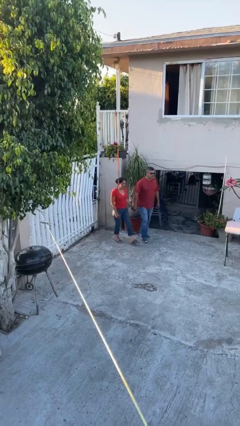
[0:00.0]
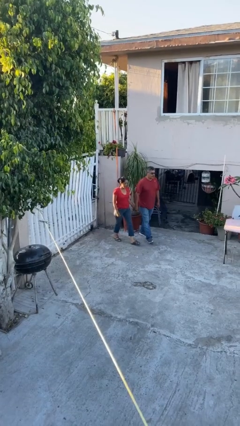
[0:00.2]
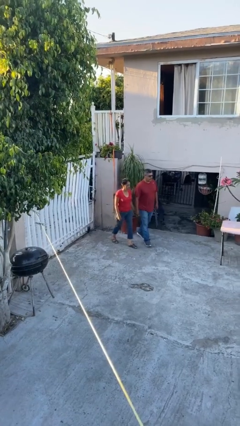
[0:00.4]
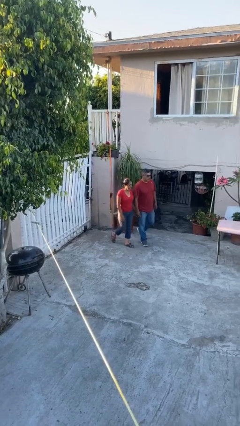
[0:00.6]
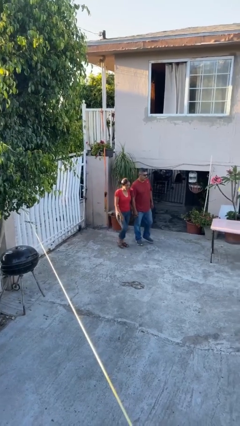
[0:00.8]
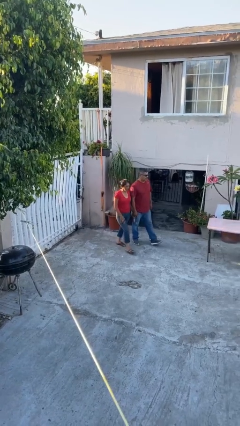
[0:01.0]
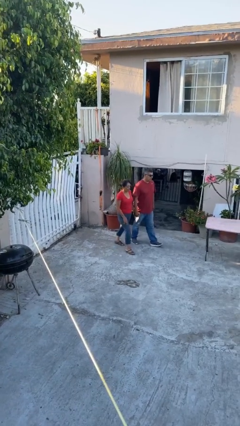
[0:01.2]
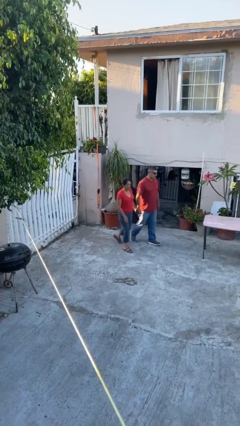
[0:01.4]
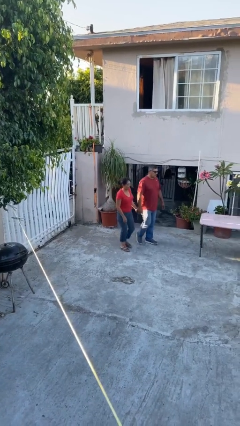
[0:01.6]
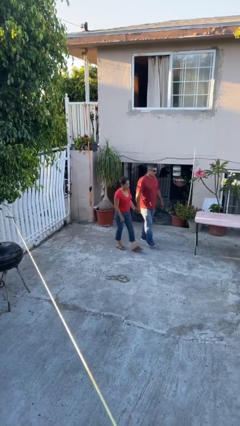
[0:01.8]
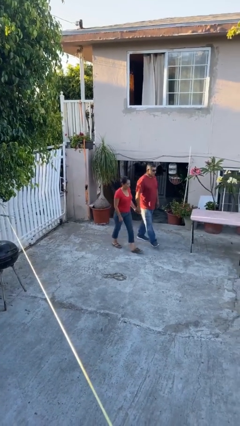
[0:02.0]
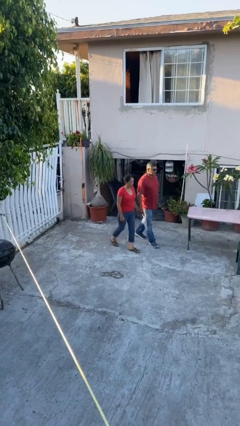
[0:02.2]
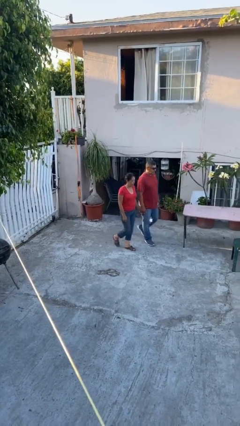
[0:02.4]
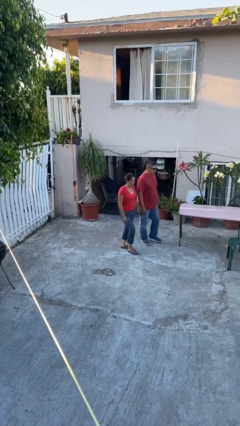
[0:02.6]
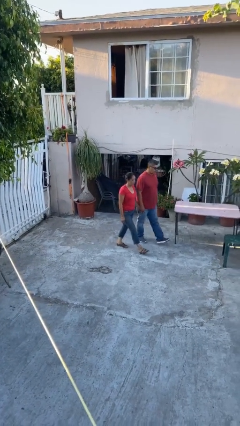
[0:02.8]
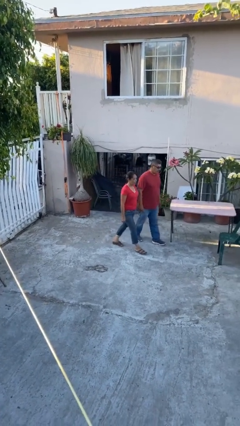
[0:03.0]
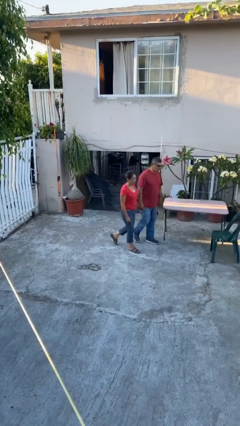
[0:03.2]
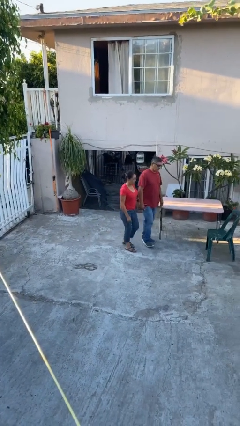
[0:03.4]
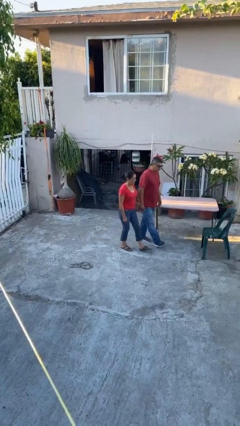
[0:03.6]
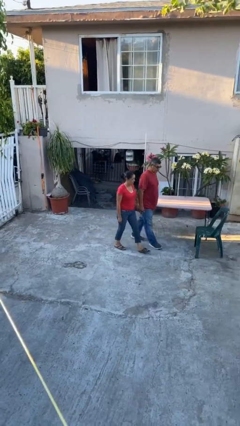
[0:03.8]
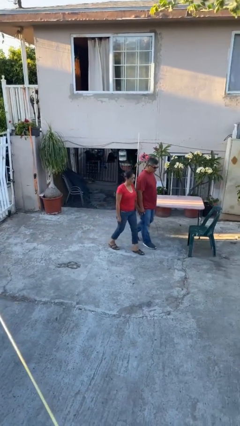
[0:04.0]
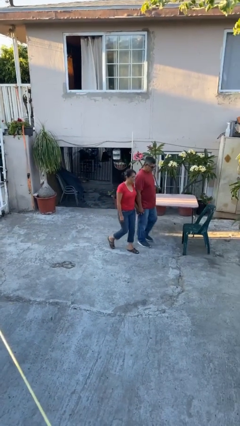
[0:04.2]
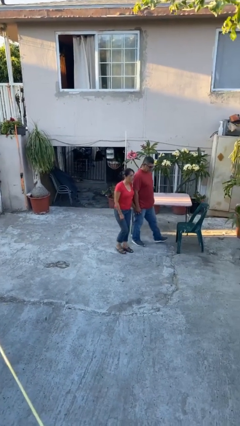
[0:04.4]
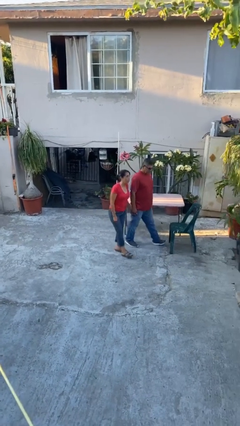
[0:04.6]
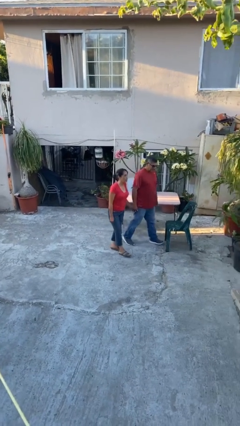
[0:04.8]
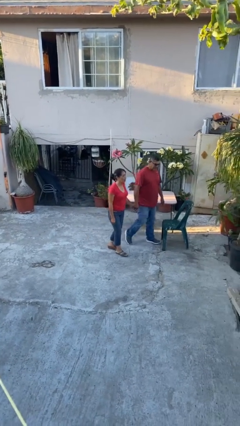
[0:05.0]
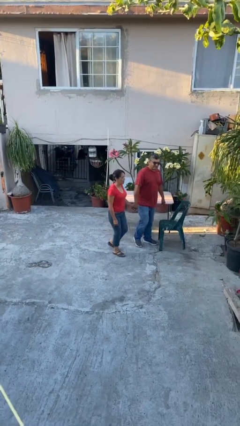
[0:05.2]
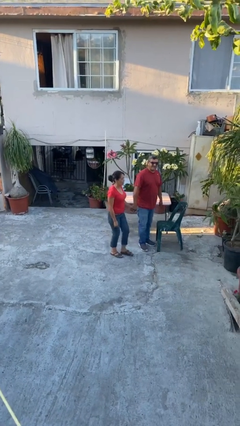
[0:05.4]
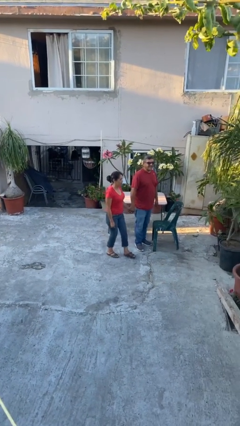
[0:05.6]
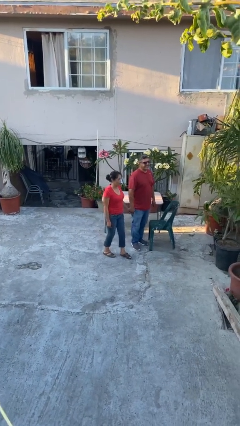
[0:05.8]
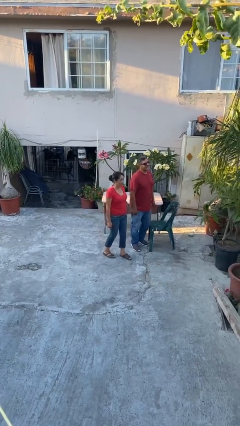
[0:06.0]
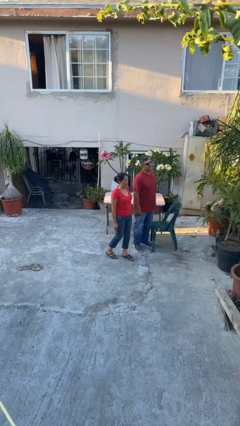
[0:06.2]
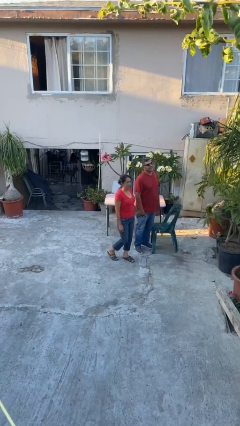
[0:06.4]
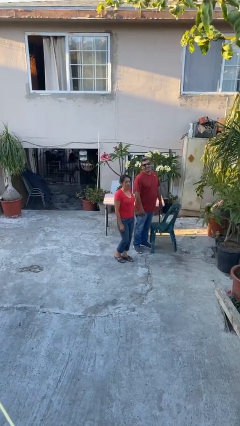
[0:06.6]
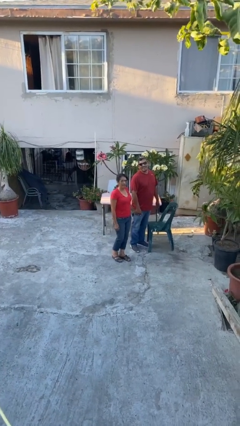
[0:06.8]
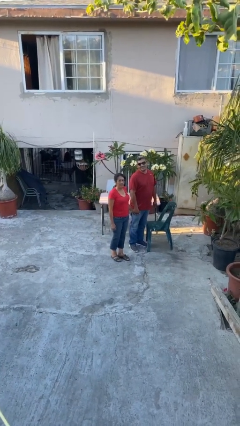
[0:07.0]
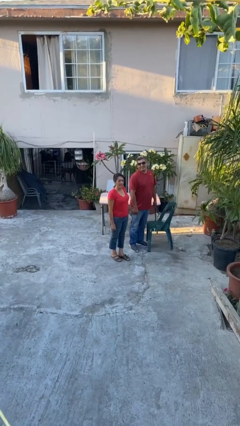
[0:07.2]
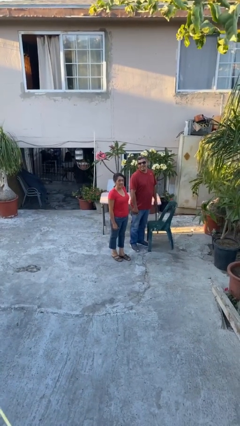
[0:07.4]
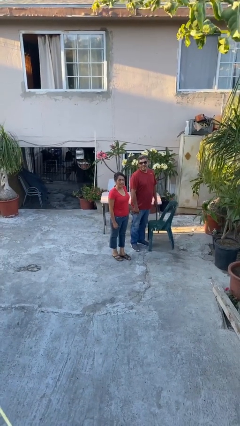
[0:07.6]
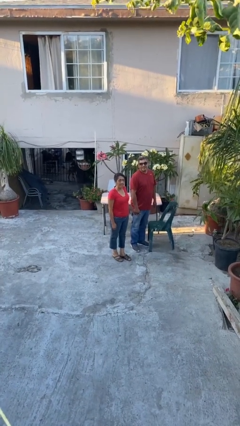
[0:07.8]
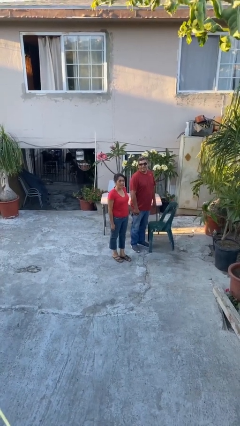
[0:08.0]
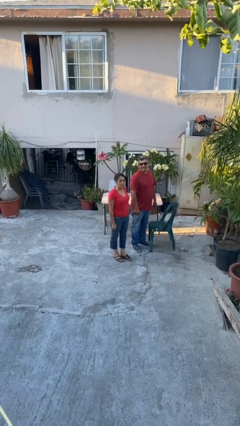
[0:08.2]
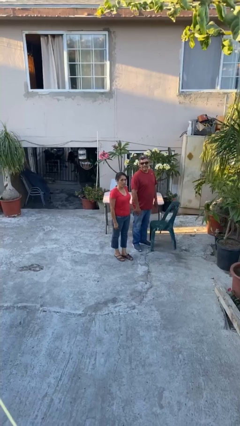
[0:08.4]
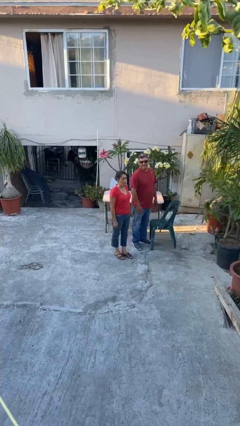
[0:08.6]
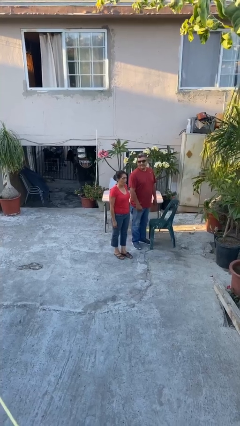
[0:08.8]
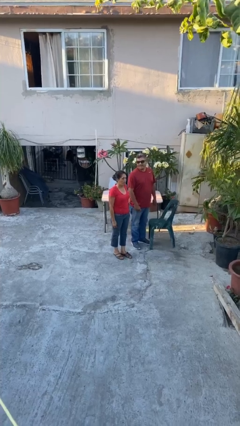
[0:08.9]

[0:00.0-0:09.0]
person holds hand

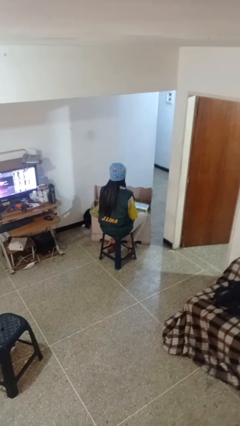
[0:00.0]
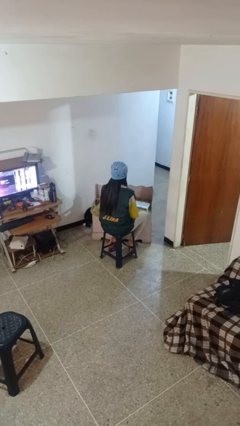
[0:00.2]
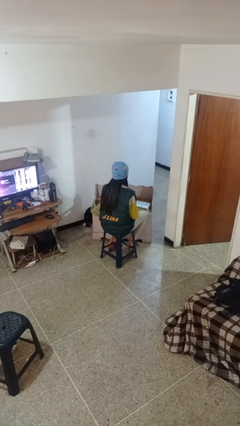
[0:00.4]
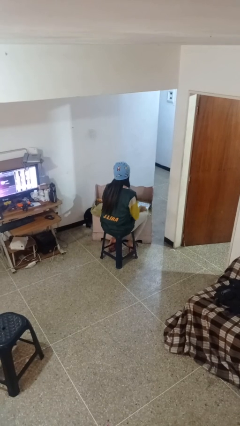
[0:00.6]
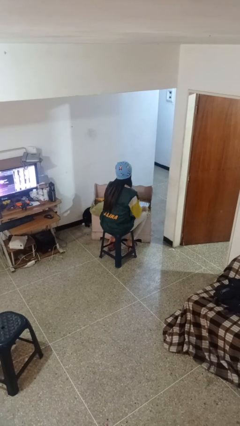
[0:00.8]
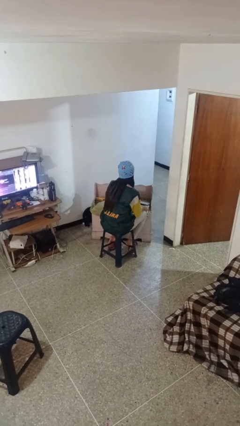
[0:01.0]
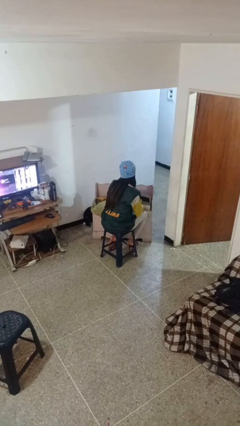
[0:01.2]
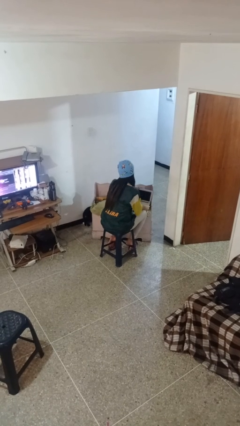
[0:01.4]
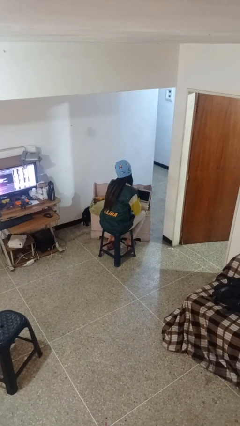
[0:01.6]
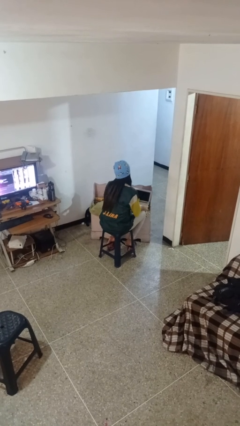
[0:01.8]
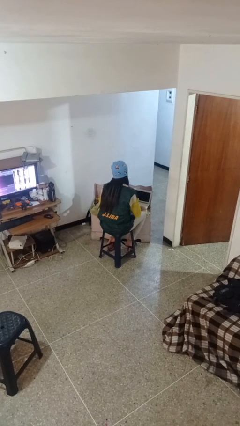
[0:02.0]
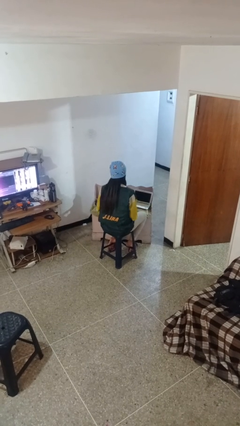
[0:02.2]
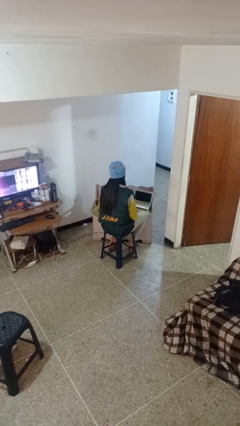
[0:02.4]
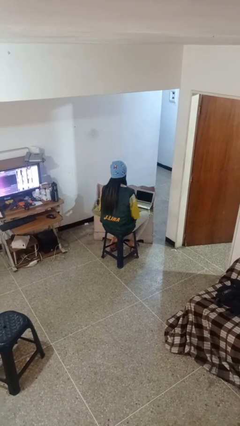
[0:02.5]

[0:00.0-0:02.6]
person opens laptop

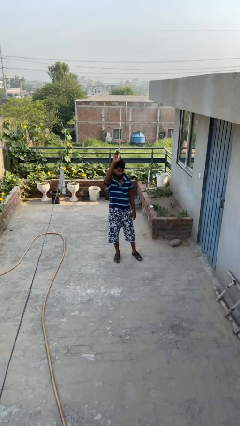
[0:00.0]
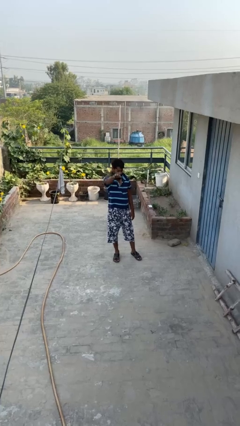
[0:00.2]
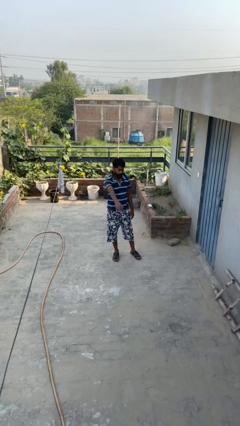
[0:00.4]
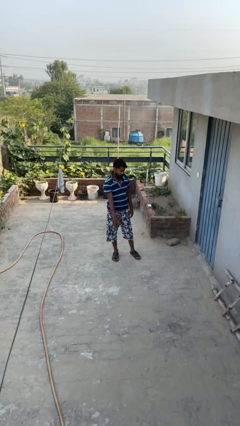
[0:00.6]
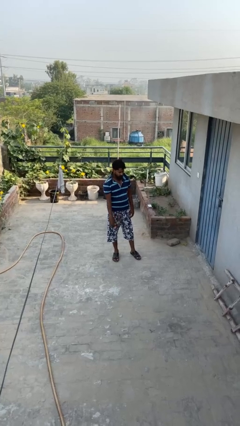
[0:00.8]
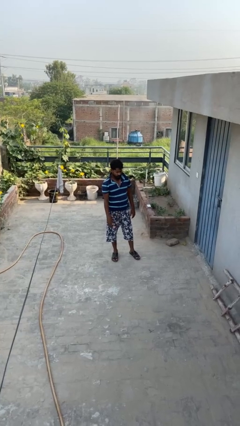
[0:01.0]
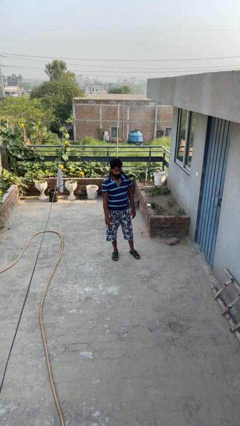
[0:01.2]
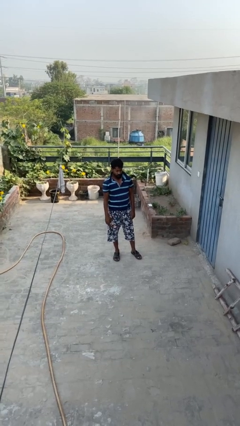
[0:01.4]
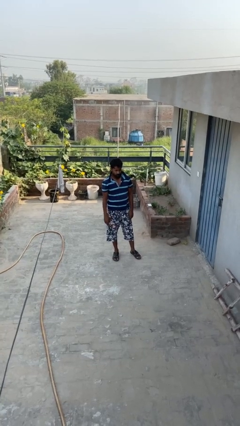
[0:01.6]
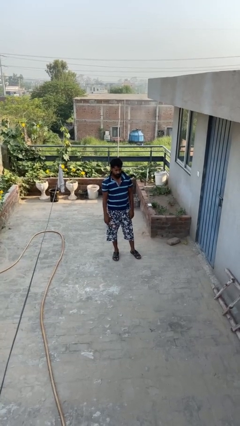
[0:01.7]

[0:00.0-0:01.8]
person gestures swipe down

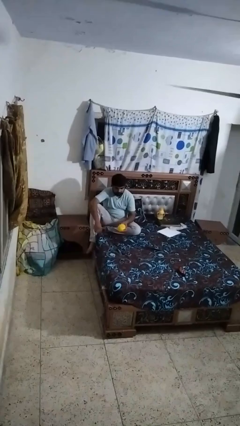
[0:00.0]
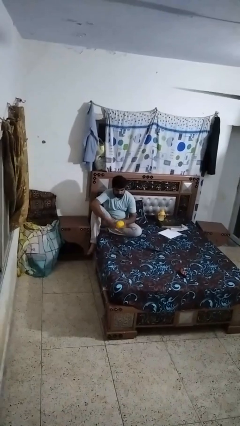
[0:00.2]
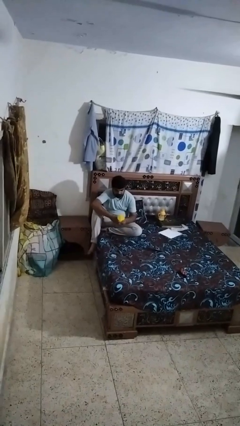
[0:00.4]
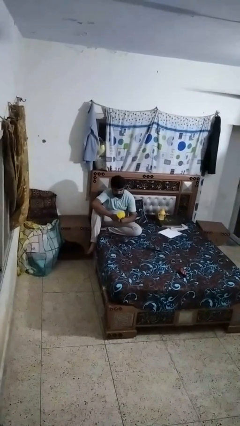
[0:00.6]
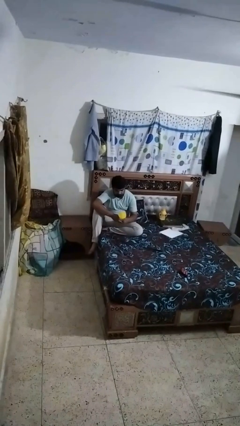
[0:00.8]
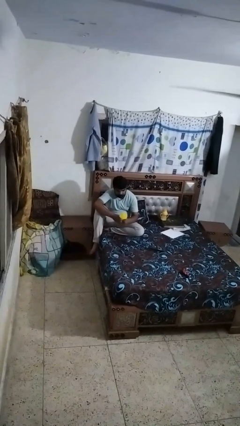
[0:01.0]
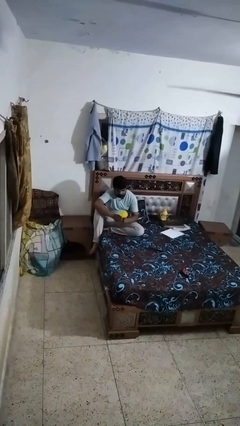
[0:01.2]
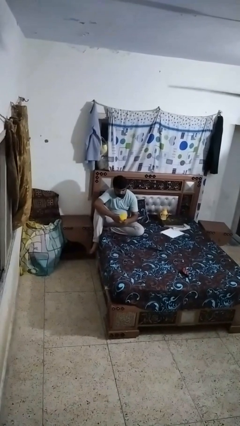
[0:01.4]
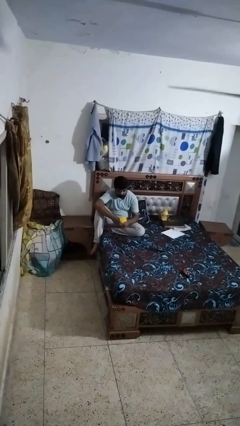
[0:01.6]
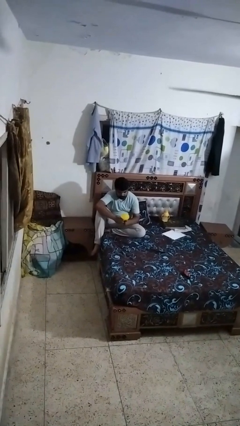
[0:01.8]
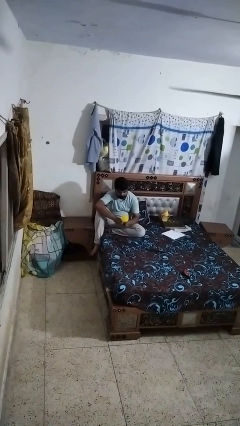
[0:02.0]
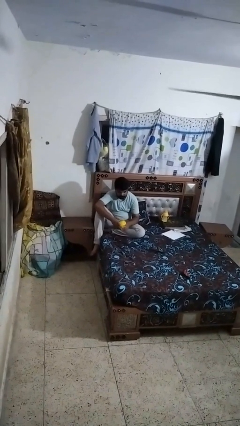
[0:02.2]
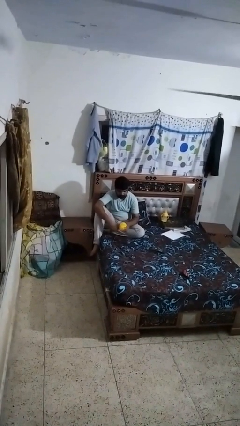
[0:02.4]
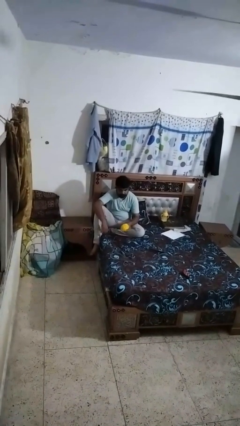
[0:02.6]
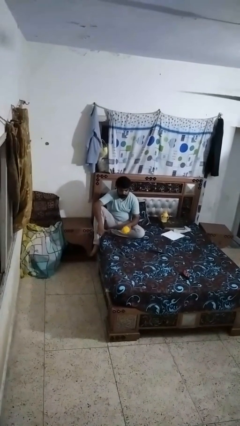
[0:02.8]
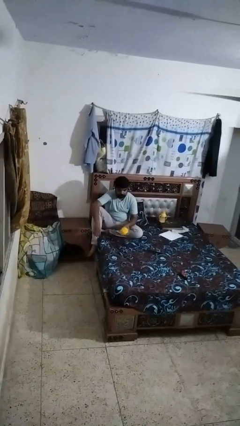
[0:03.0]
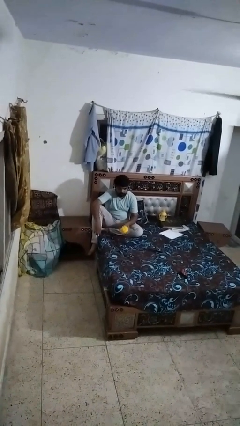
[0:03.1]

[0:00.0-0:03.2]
person squeezes object

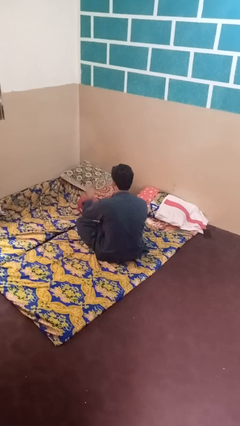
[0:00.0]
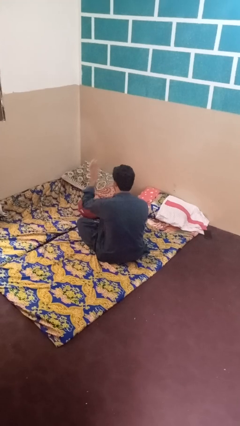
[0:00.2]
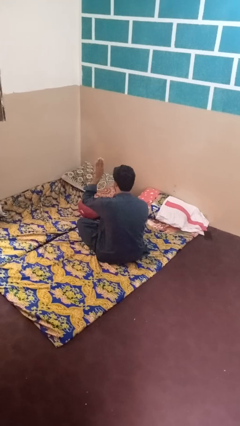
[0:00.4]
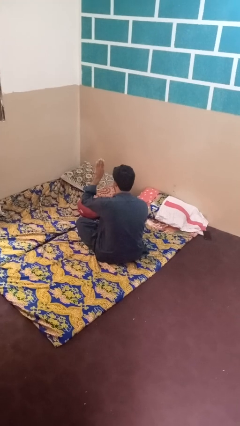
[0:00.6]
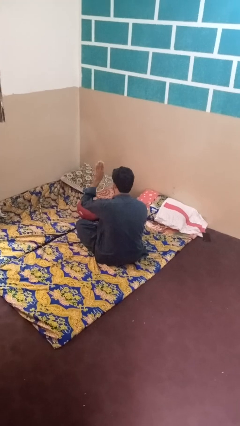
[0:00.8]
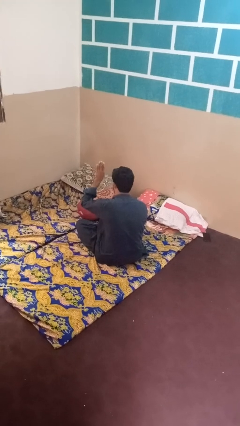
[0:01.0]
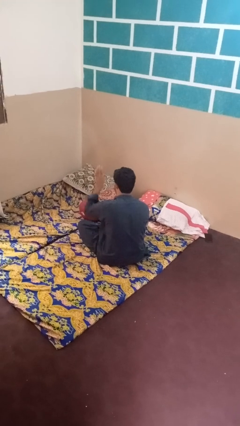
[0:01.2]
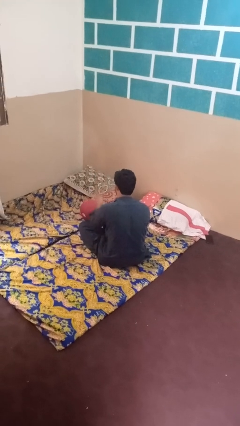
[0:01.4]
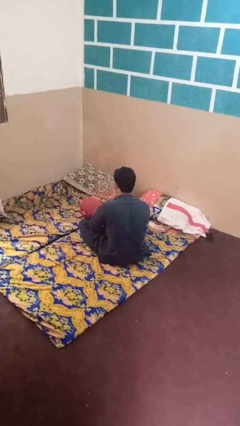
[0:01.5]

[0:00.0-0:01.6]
person gestures number four
